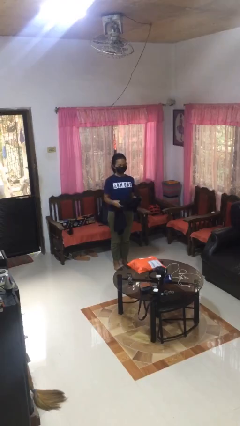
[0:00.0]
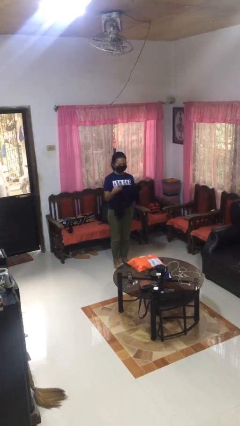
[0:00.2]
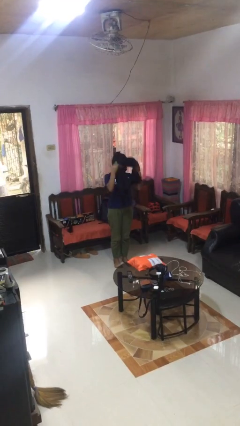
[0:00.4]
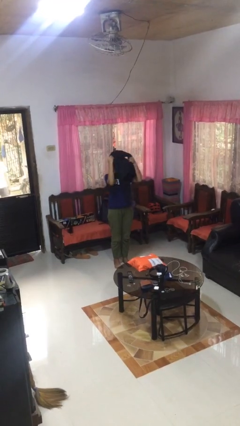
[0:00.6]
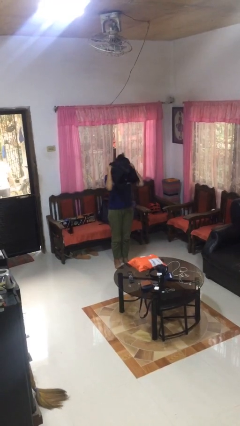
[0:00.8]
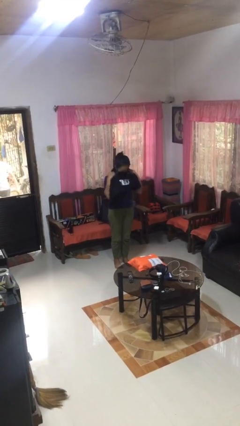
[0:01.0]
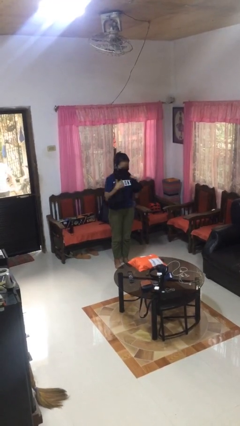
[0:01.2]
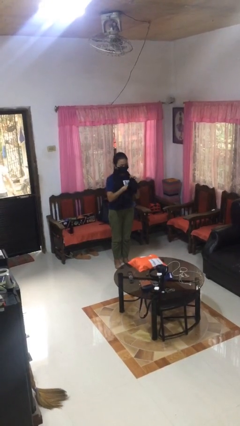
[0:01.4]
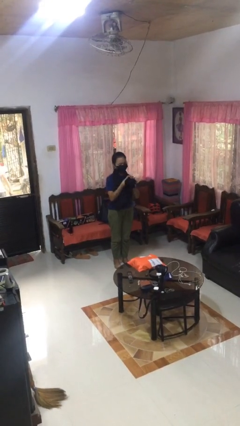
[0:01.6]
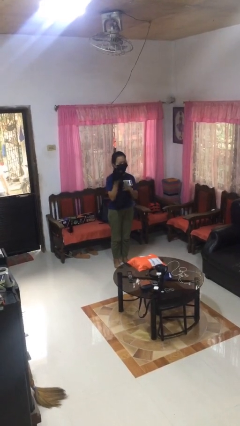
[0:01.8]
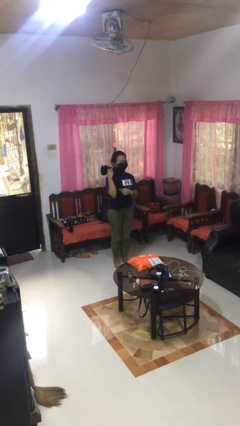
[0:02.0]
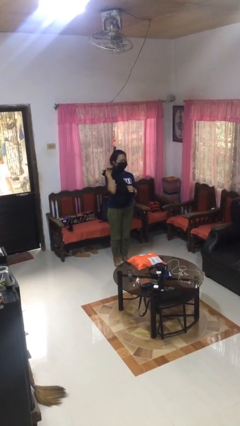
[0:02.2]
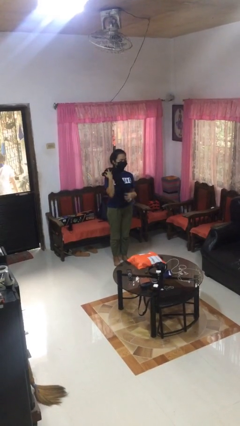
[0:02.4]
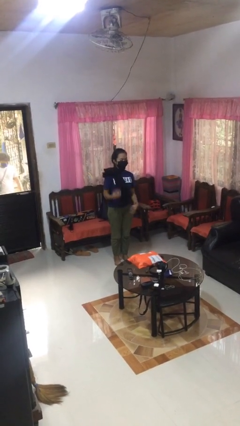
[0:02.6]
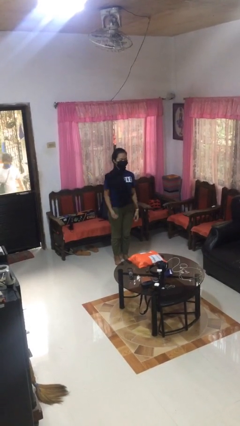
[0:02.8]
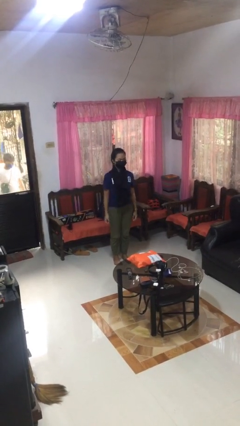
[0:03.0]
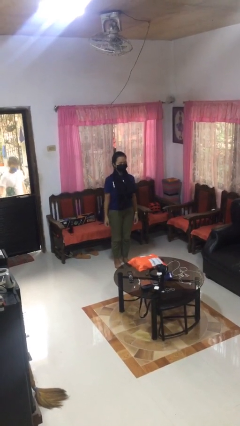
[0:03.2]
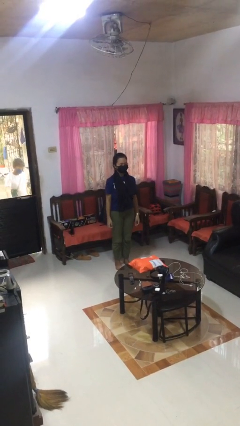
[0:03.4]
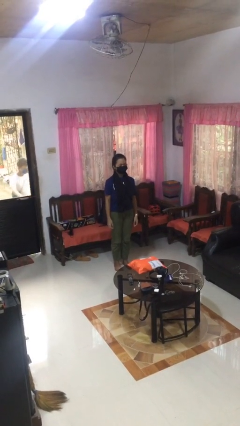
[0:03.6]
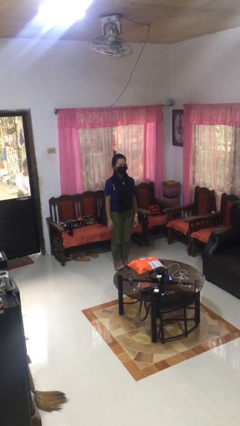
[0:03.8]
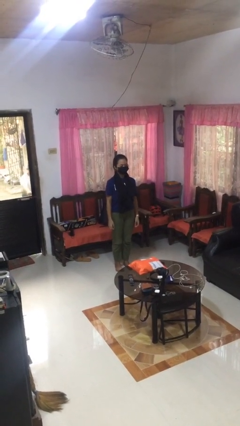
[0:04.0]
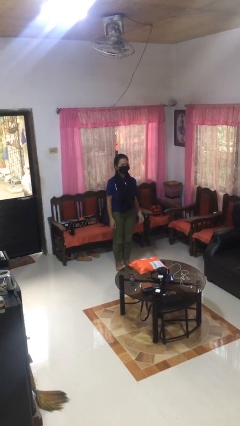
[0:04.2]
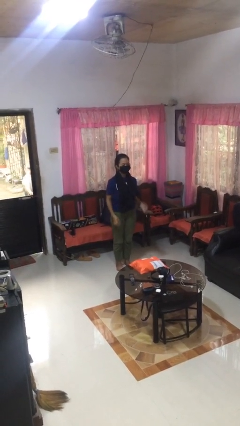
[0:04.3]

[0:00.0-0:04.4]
person puts on scarf

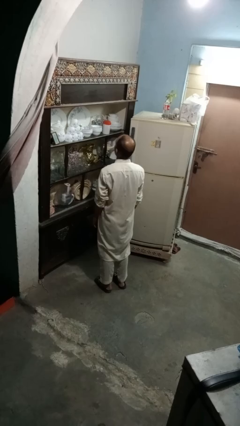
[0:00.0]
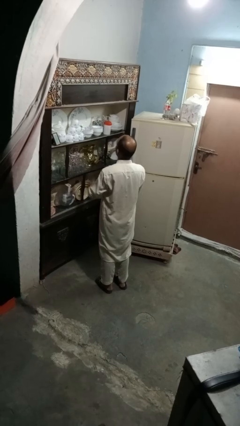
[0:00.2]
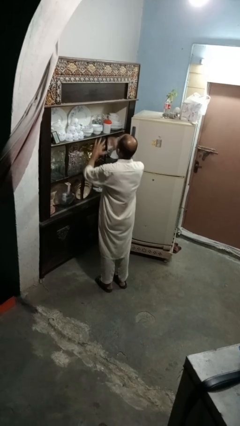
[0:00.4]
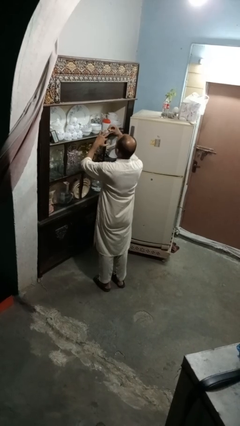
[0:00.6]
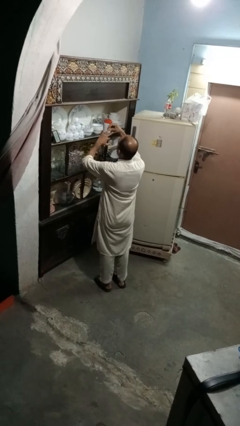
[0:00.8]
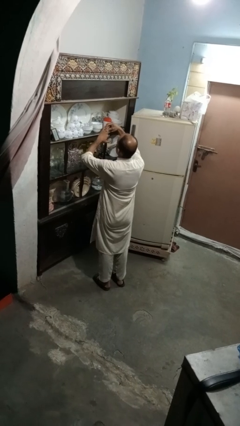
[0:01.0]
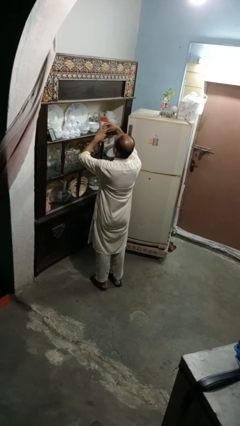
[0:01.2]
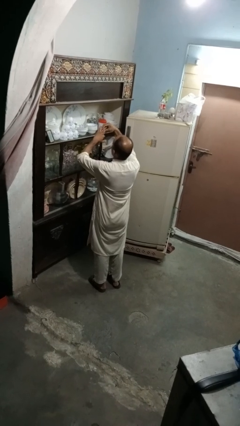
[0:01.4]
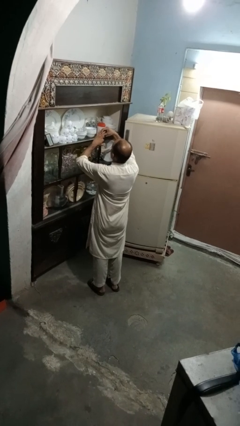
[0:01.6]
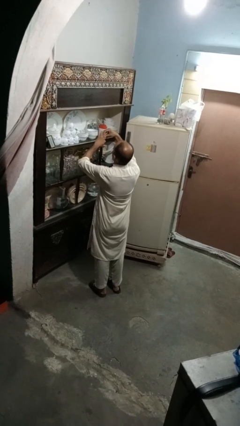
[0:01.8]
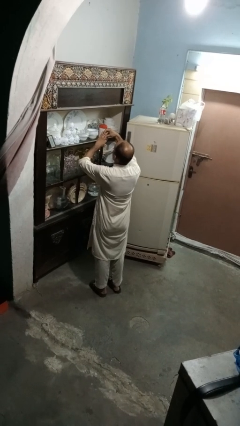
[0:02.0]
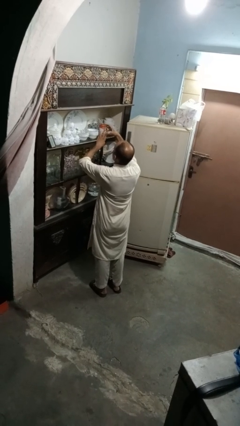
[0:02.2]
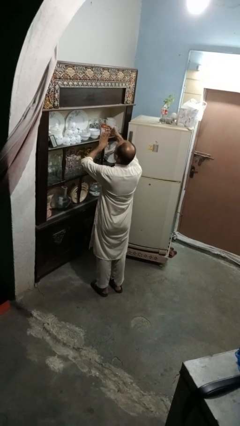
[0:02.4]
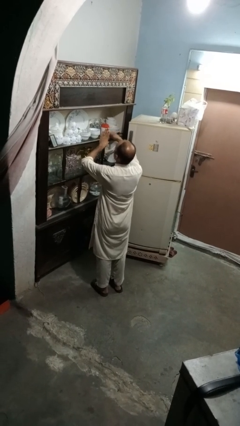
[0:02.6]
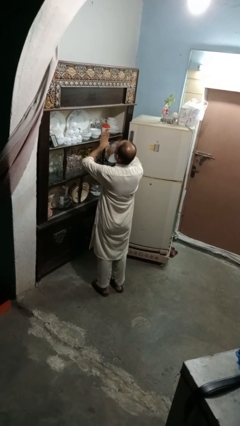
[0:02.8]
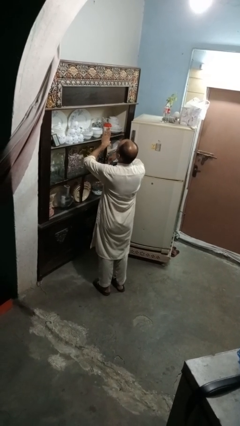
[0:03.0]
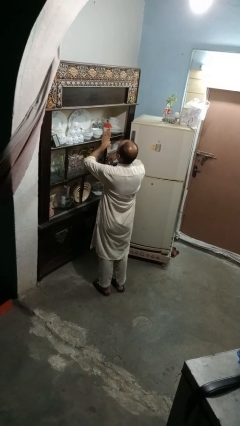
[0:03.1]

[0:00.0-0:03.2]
person puts on ring

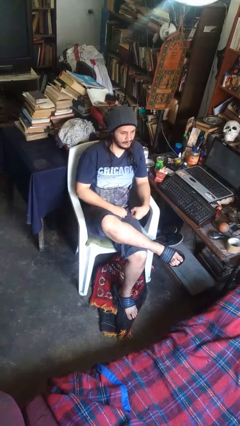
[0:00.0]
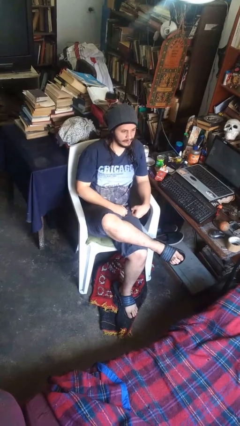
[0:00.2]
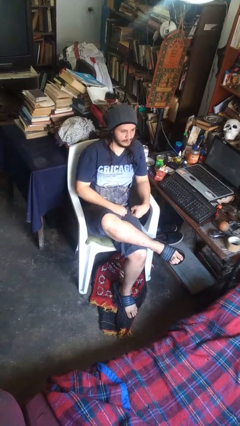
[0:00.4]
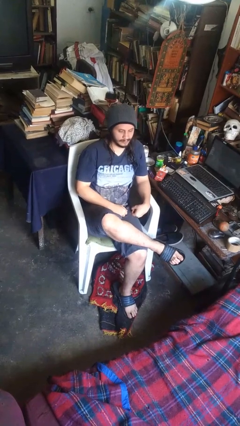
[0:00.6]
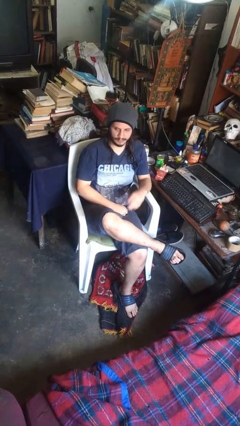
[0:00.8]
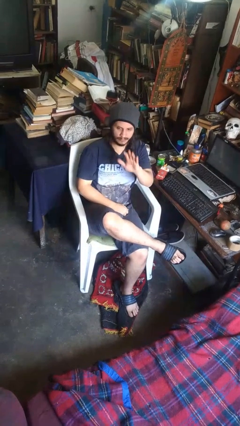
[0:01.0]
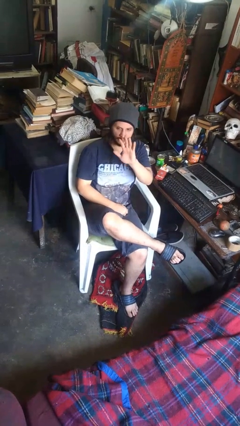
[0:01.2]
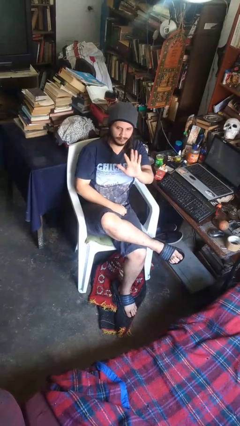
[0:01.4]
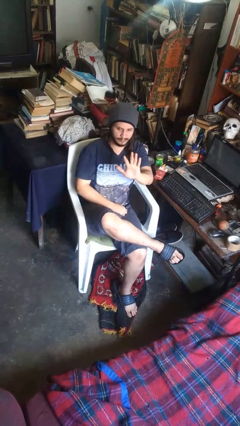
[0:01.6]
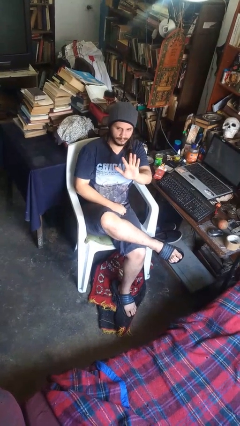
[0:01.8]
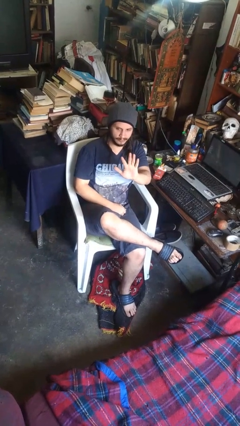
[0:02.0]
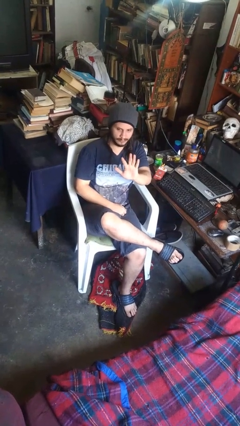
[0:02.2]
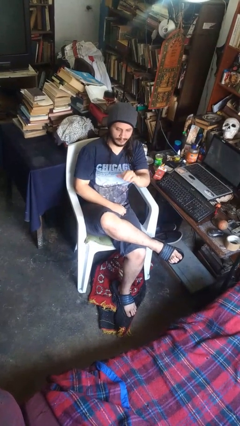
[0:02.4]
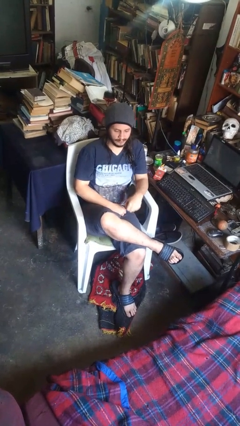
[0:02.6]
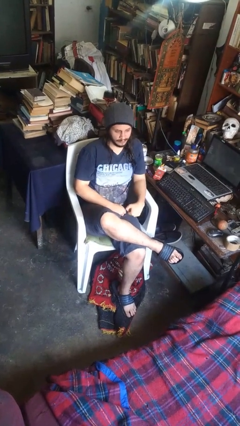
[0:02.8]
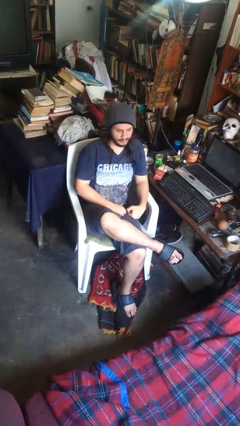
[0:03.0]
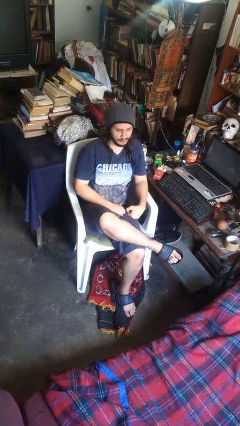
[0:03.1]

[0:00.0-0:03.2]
person gestures number five

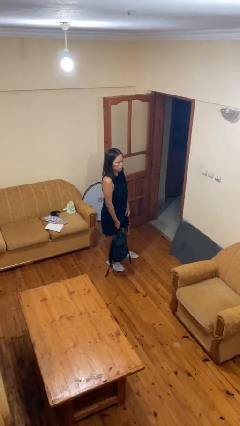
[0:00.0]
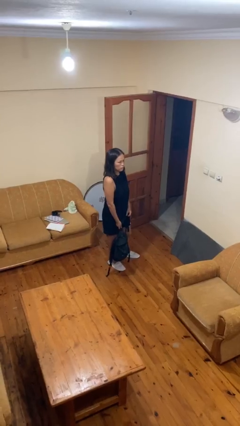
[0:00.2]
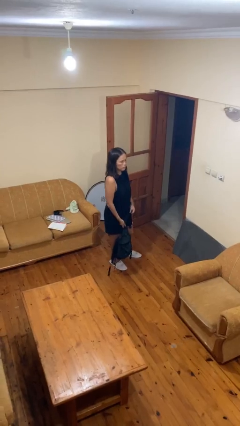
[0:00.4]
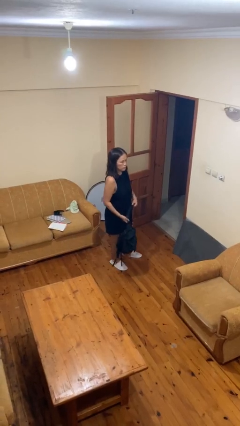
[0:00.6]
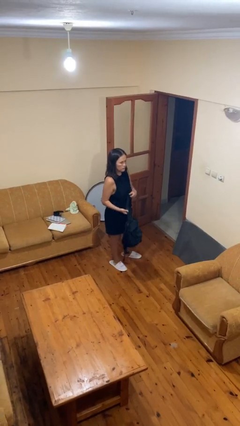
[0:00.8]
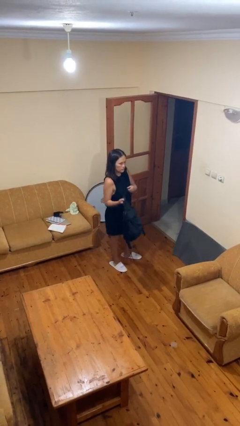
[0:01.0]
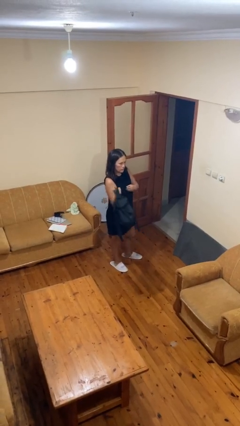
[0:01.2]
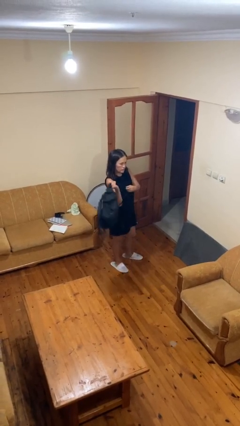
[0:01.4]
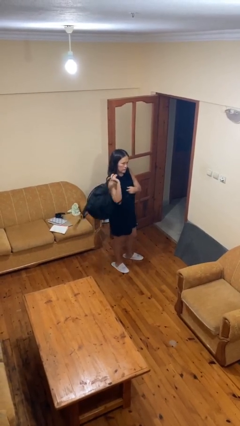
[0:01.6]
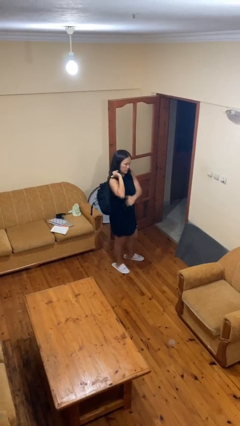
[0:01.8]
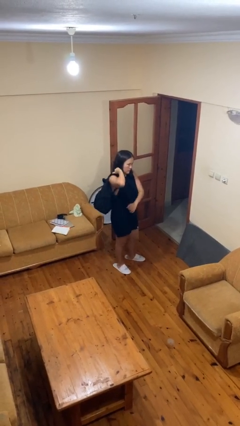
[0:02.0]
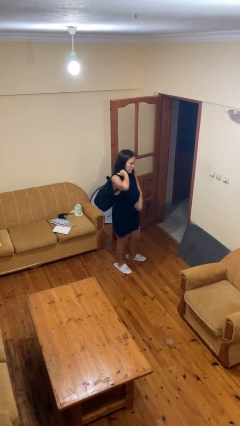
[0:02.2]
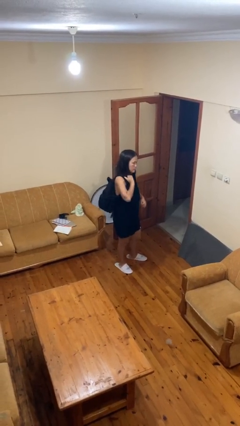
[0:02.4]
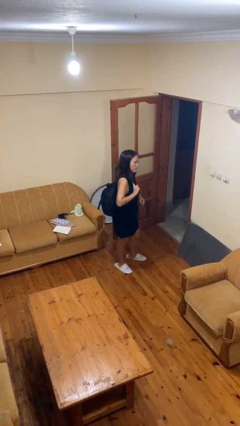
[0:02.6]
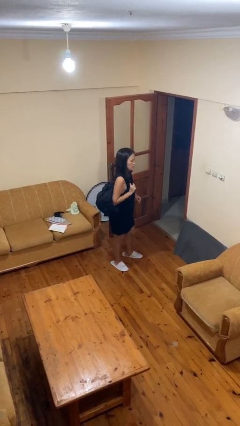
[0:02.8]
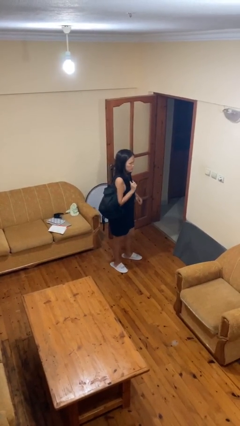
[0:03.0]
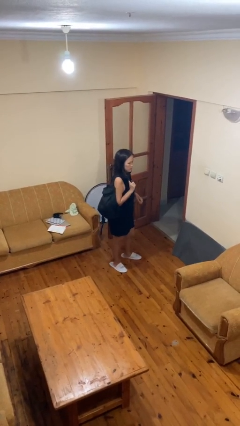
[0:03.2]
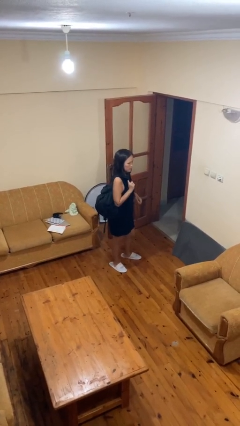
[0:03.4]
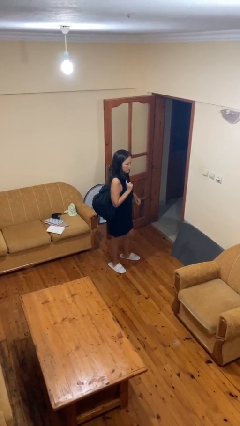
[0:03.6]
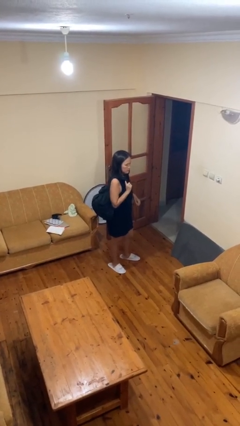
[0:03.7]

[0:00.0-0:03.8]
person puts on backpack

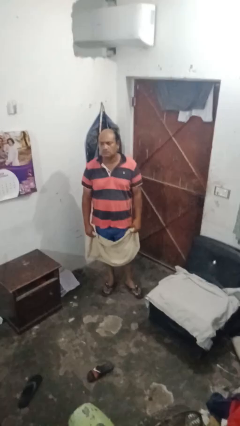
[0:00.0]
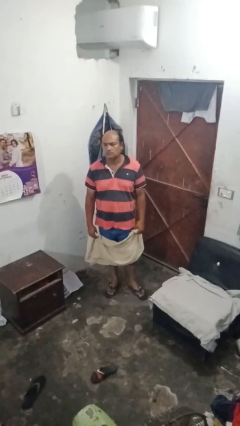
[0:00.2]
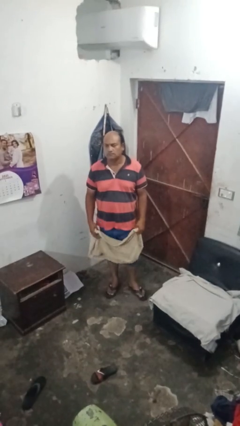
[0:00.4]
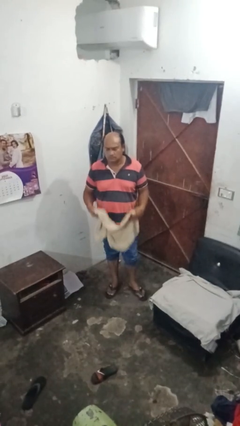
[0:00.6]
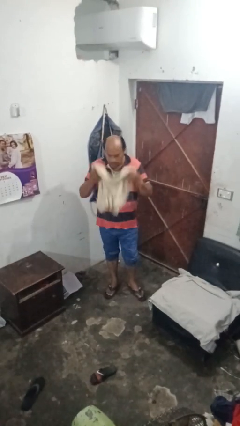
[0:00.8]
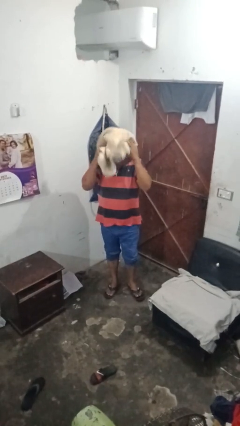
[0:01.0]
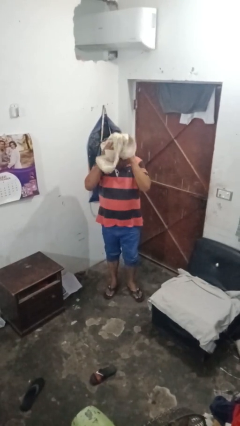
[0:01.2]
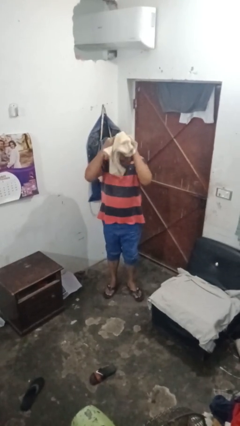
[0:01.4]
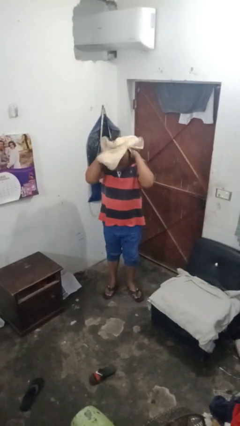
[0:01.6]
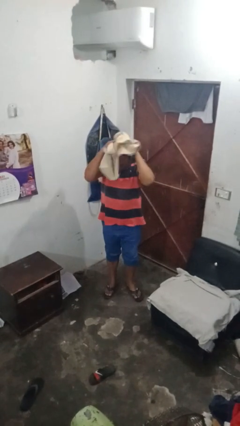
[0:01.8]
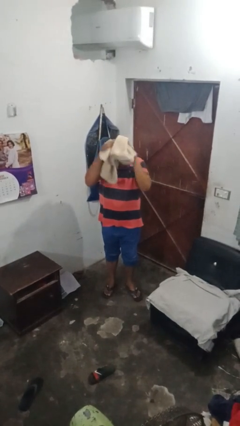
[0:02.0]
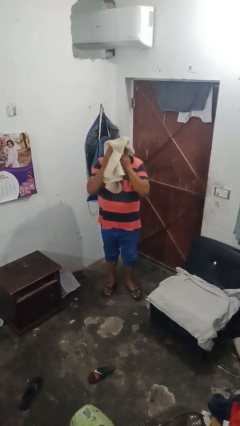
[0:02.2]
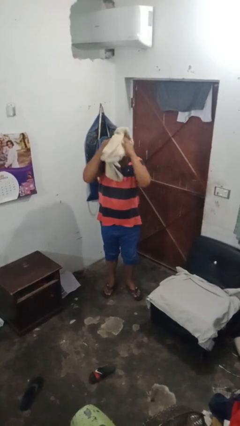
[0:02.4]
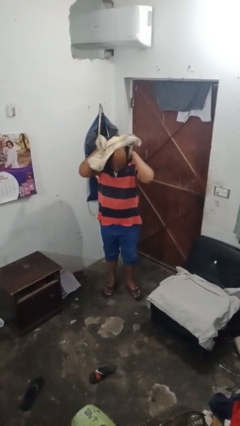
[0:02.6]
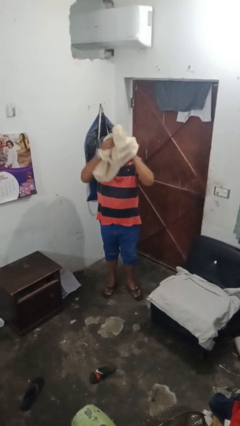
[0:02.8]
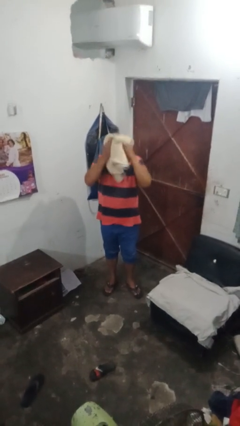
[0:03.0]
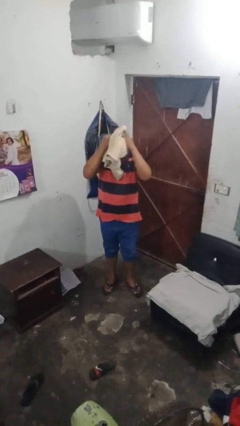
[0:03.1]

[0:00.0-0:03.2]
person dries hair with towel

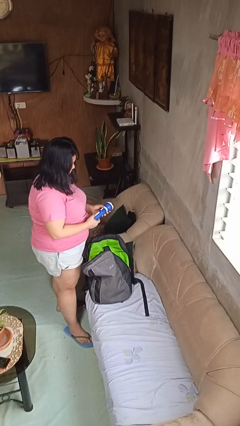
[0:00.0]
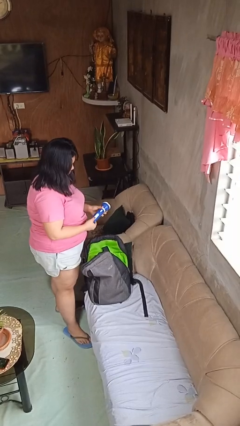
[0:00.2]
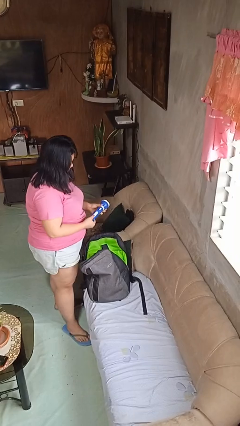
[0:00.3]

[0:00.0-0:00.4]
person takes object from backpack
